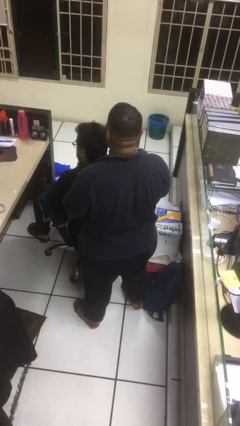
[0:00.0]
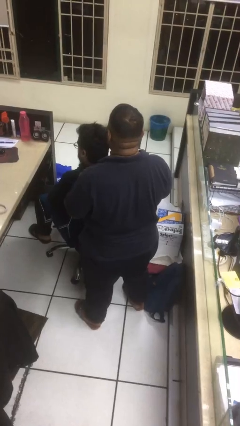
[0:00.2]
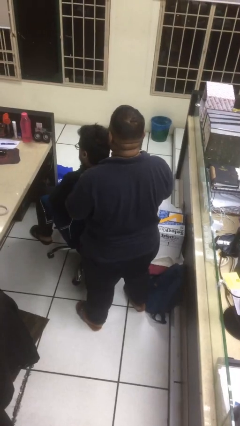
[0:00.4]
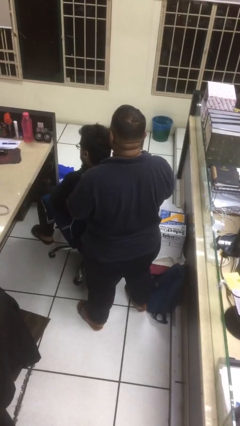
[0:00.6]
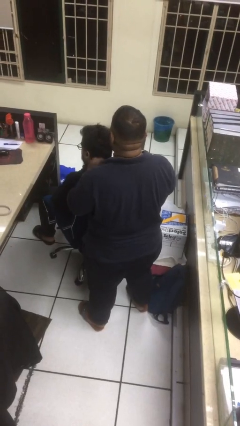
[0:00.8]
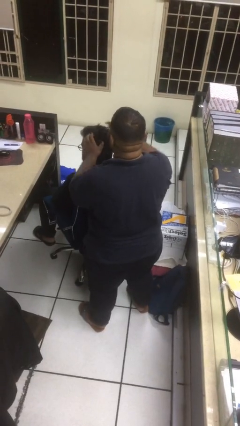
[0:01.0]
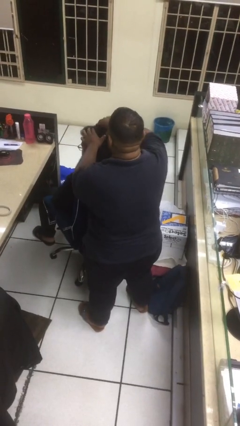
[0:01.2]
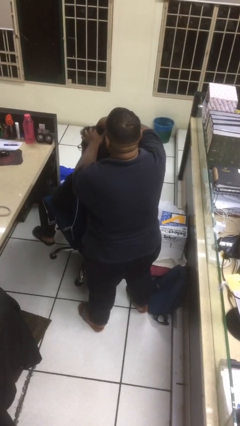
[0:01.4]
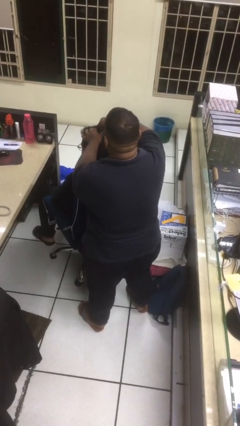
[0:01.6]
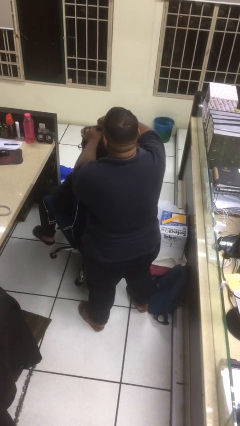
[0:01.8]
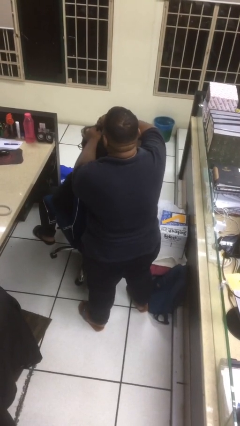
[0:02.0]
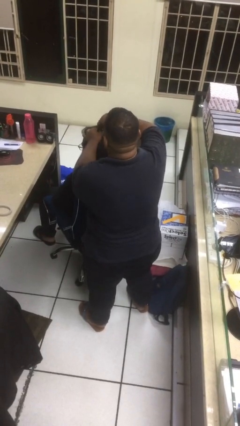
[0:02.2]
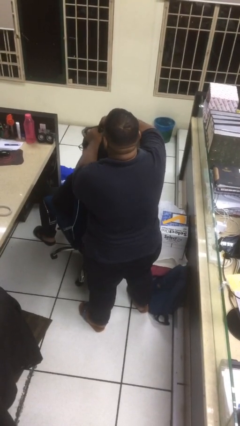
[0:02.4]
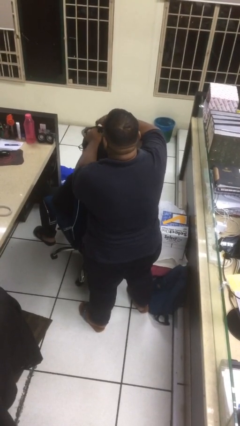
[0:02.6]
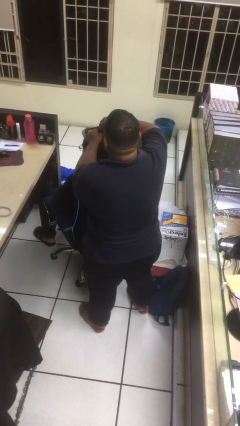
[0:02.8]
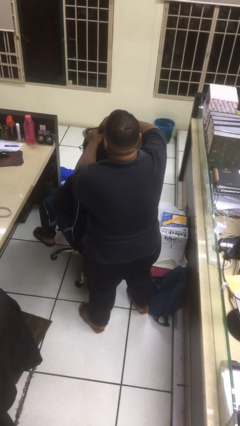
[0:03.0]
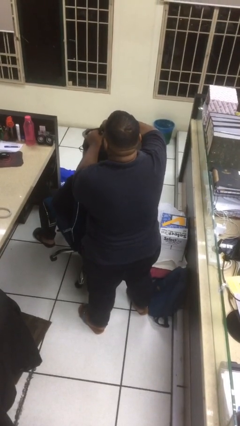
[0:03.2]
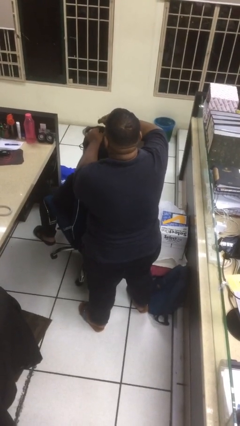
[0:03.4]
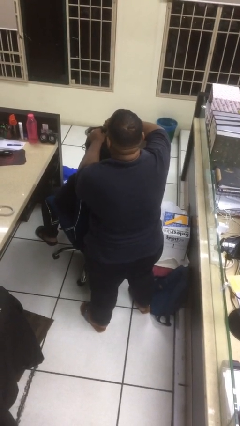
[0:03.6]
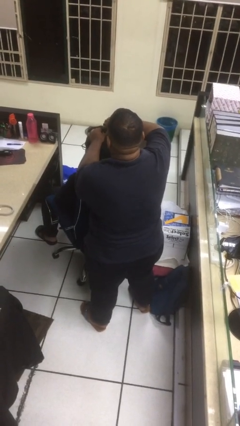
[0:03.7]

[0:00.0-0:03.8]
person braids hair of person

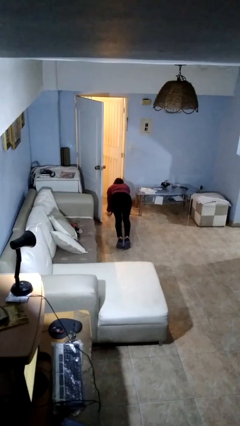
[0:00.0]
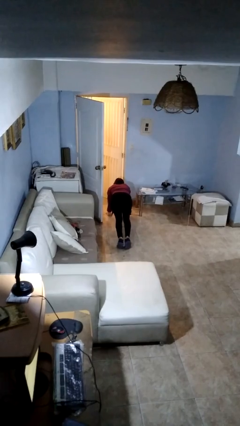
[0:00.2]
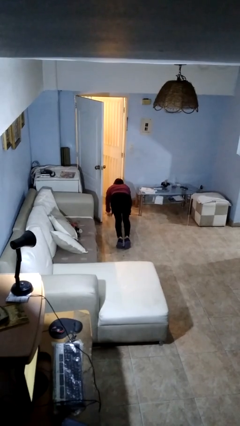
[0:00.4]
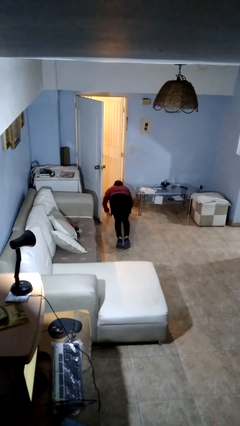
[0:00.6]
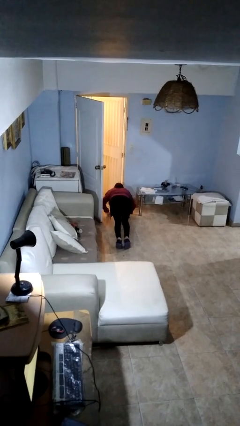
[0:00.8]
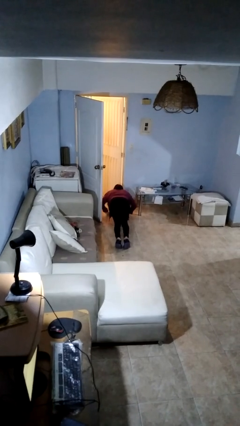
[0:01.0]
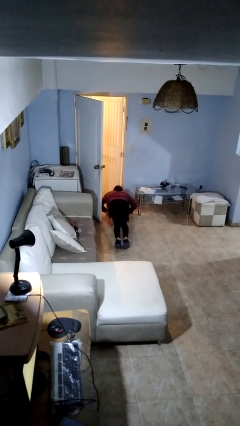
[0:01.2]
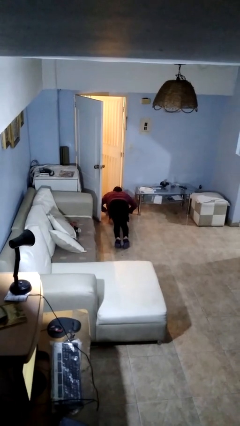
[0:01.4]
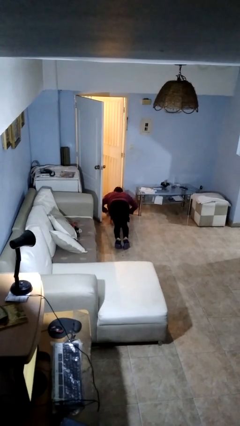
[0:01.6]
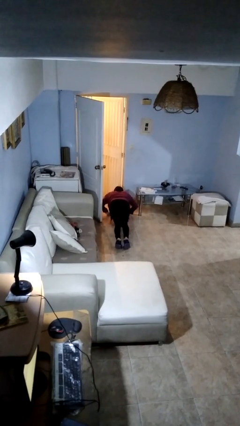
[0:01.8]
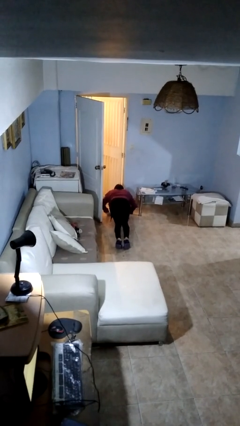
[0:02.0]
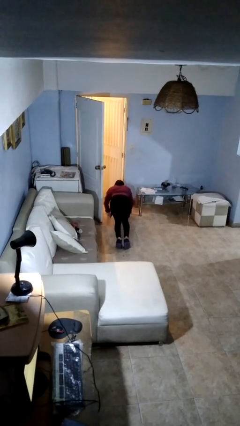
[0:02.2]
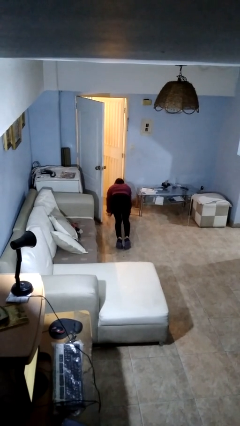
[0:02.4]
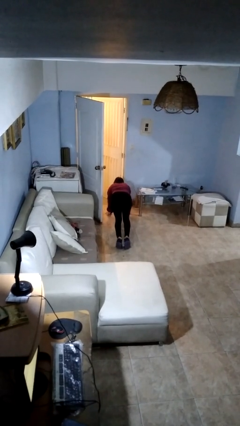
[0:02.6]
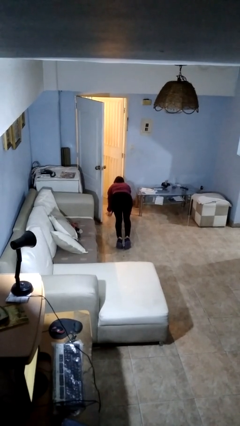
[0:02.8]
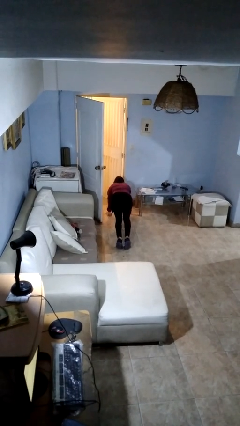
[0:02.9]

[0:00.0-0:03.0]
person exercises with pushup

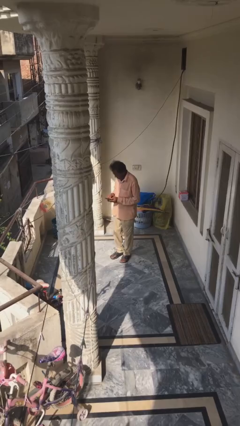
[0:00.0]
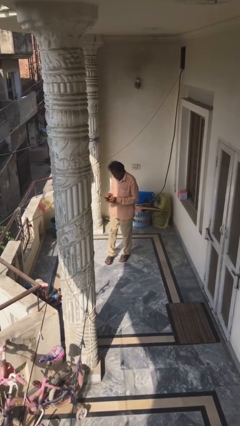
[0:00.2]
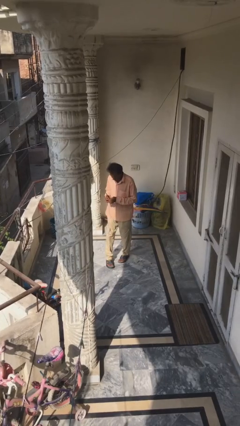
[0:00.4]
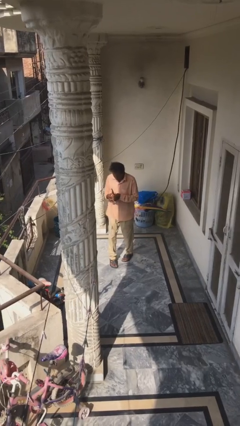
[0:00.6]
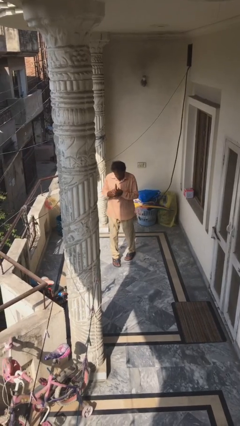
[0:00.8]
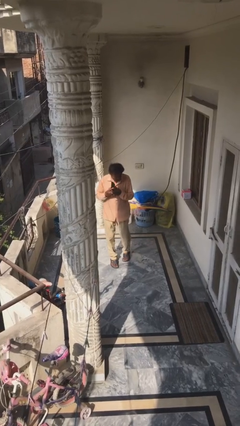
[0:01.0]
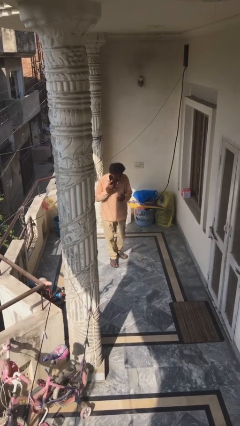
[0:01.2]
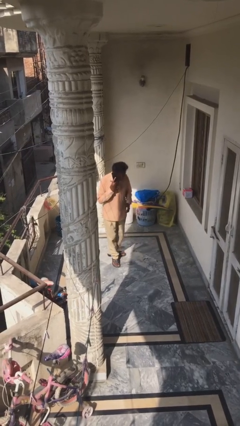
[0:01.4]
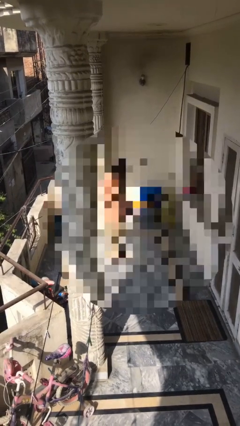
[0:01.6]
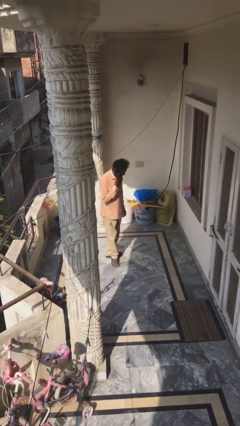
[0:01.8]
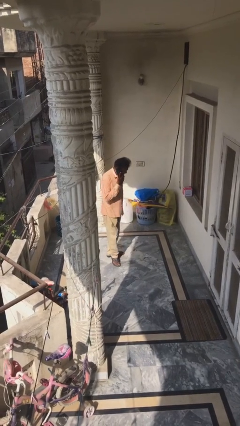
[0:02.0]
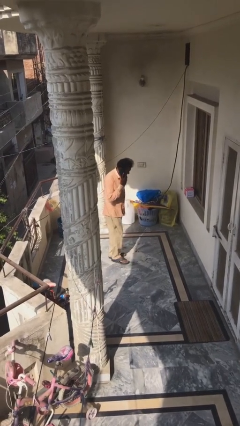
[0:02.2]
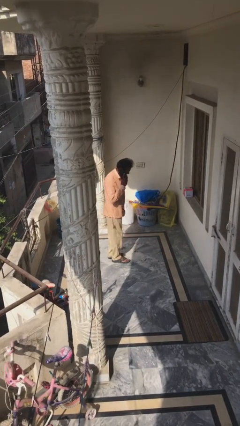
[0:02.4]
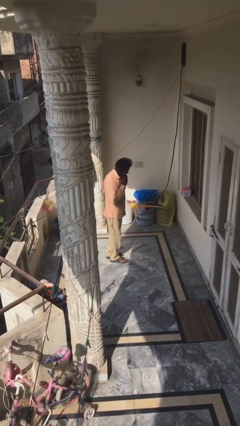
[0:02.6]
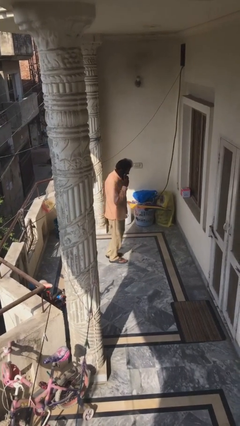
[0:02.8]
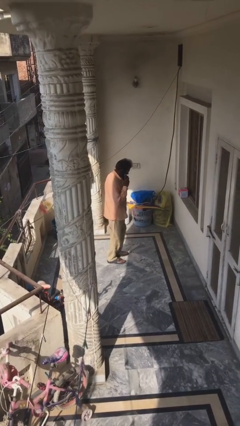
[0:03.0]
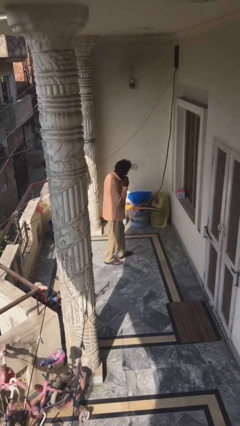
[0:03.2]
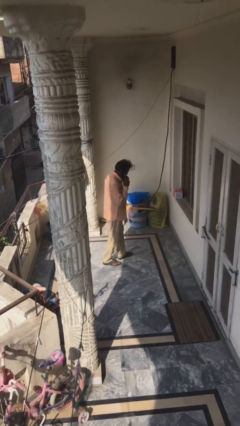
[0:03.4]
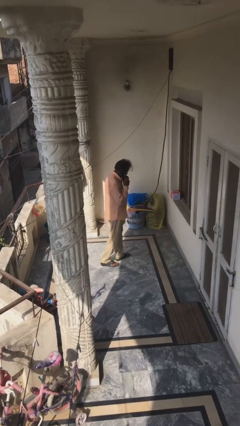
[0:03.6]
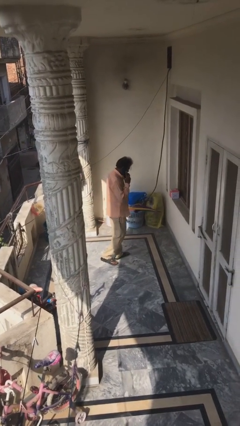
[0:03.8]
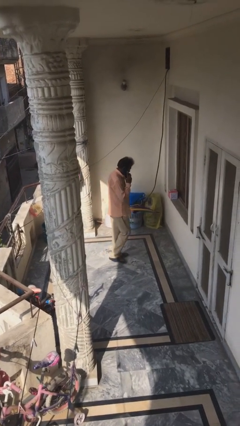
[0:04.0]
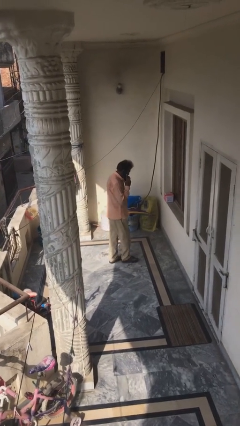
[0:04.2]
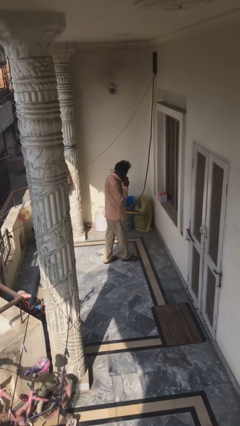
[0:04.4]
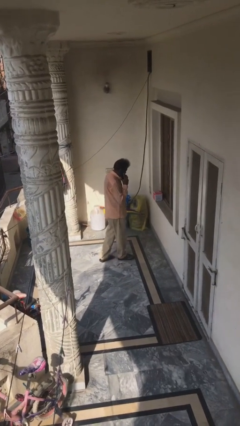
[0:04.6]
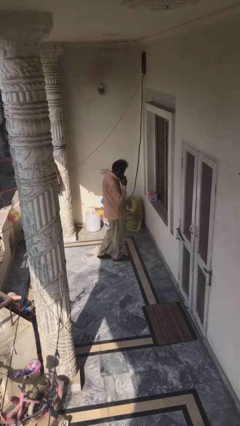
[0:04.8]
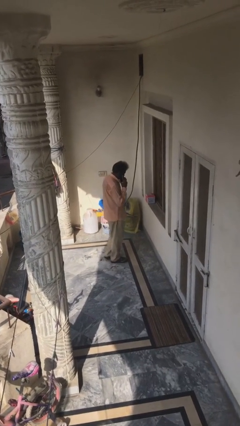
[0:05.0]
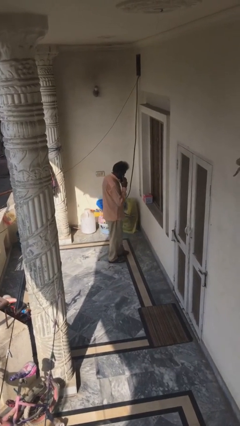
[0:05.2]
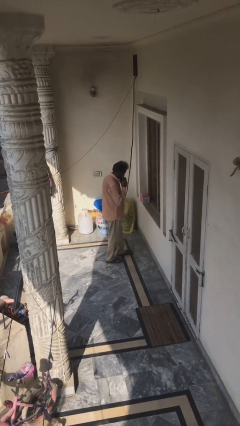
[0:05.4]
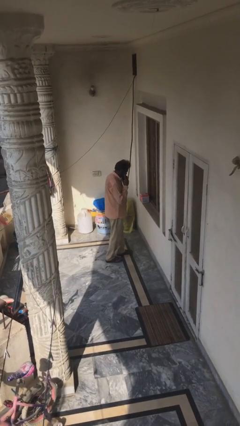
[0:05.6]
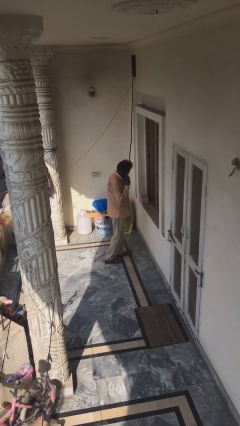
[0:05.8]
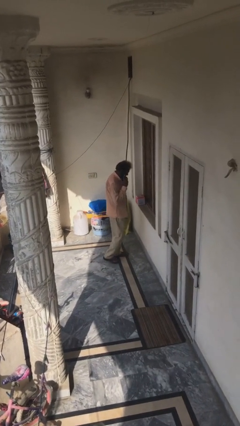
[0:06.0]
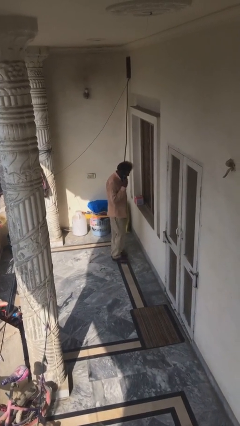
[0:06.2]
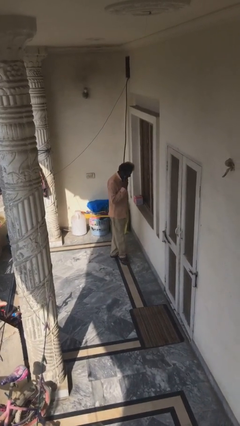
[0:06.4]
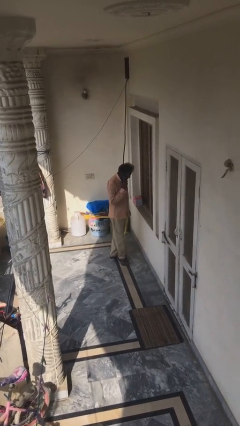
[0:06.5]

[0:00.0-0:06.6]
person talks on phone

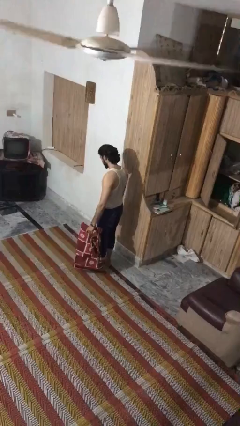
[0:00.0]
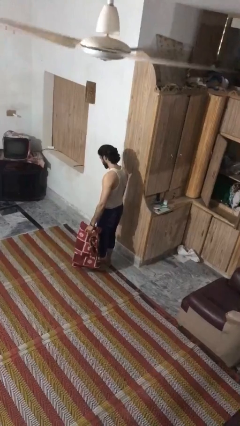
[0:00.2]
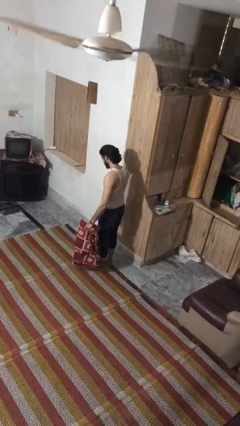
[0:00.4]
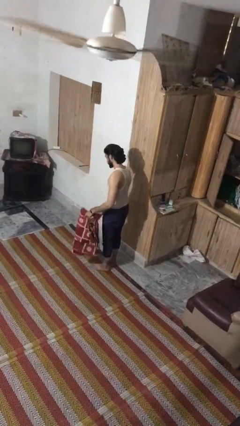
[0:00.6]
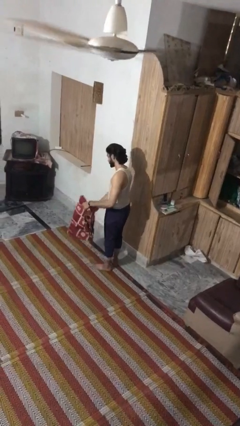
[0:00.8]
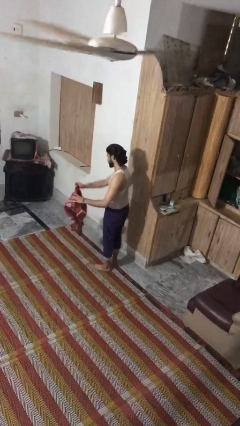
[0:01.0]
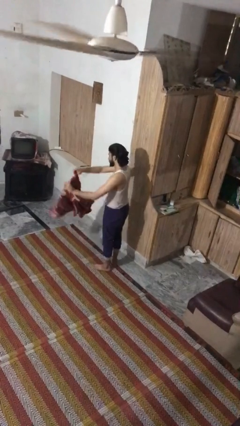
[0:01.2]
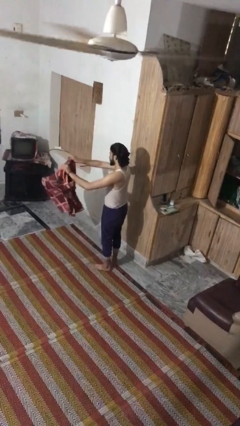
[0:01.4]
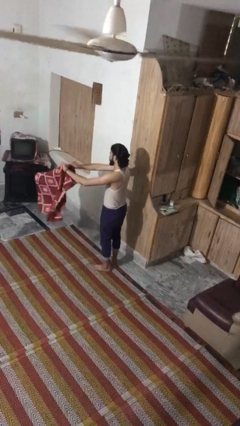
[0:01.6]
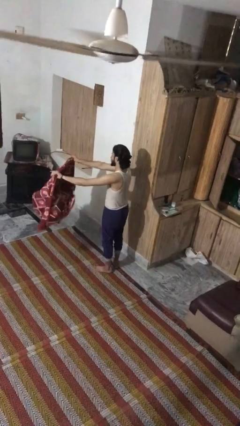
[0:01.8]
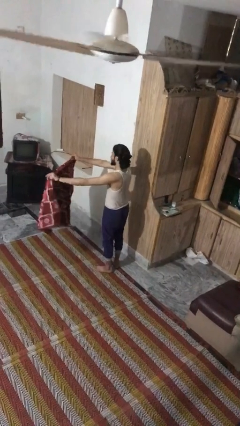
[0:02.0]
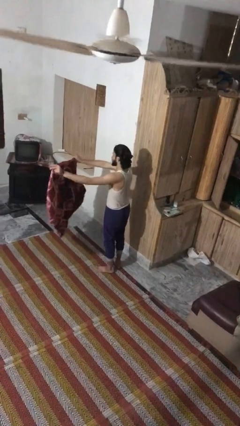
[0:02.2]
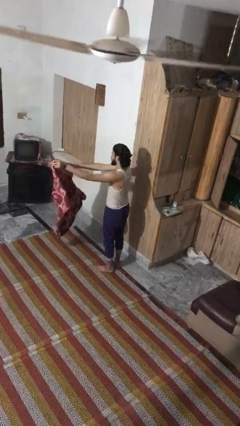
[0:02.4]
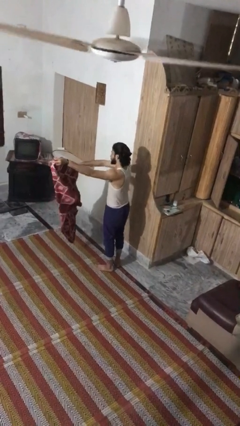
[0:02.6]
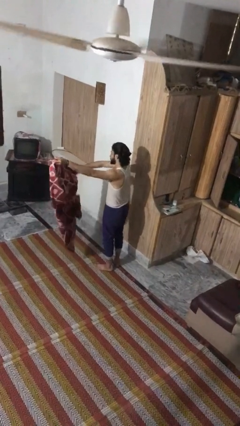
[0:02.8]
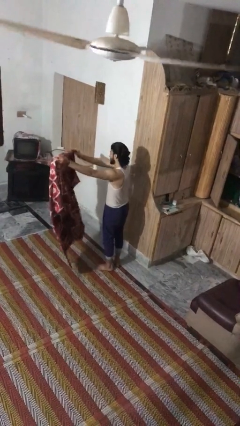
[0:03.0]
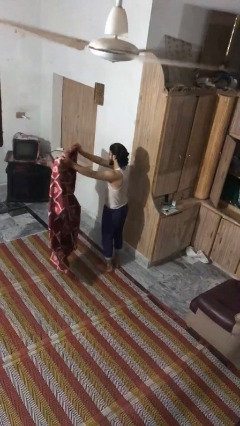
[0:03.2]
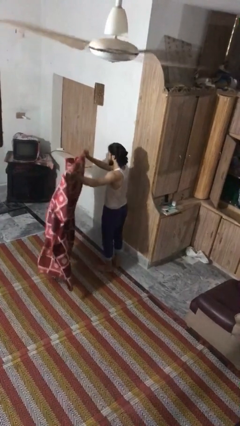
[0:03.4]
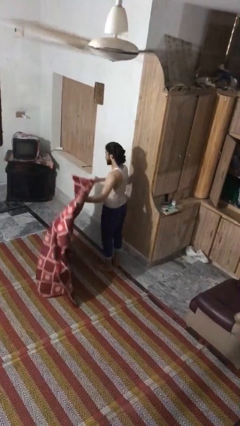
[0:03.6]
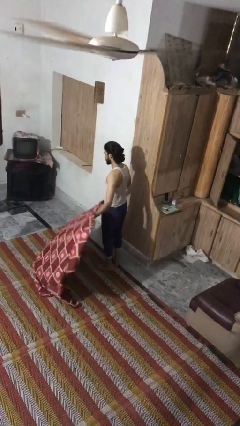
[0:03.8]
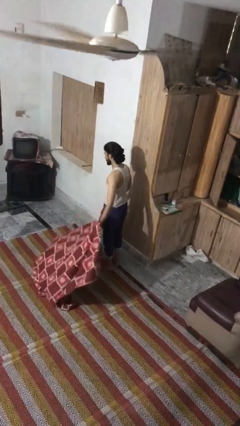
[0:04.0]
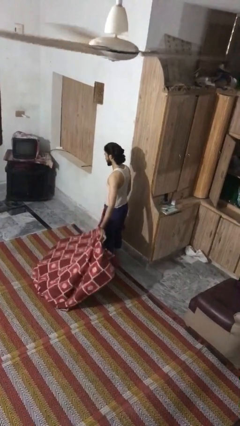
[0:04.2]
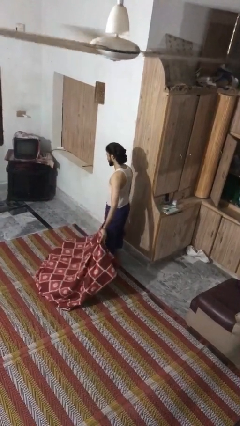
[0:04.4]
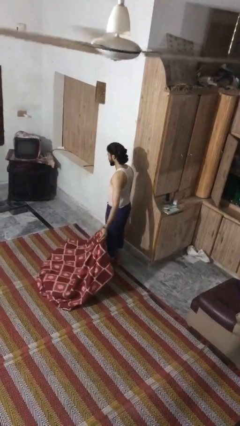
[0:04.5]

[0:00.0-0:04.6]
person unfolds blanket
